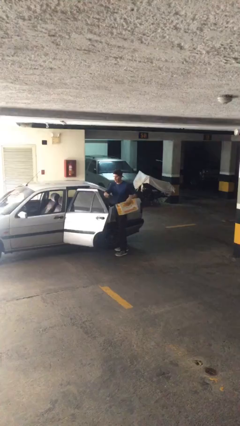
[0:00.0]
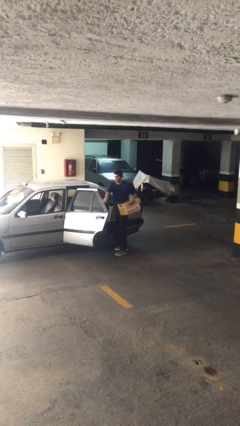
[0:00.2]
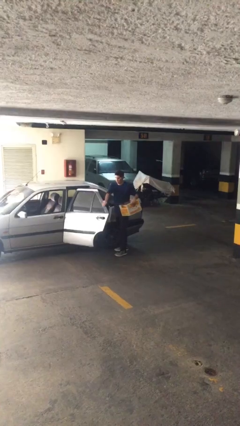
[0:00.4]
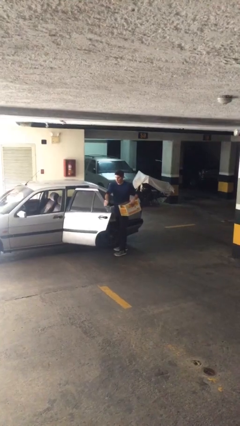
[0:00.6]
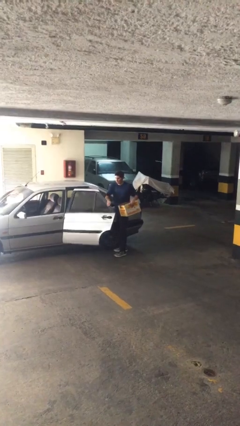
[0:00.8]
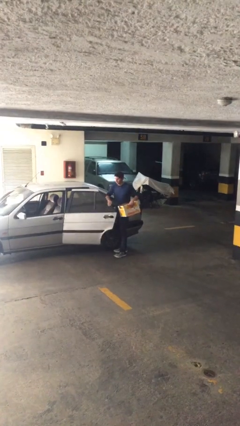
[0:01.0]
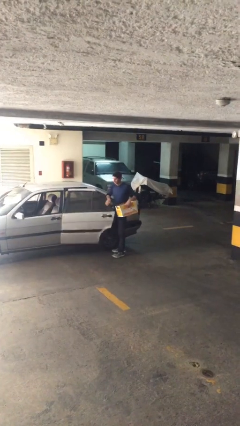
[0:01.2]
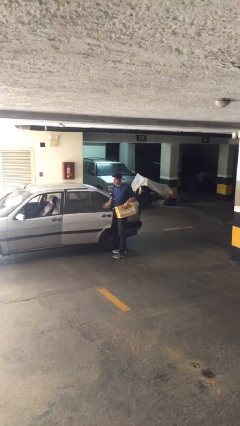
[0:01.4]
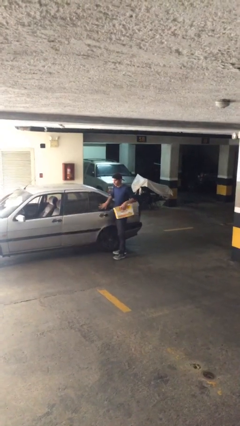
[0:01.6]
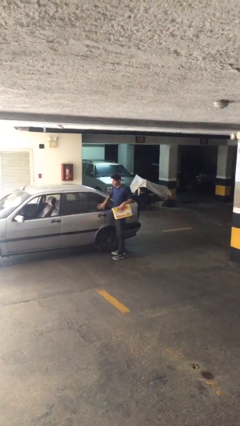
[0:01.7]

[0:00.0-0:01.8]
person closes car door

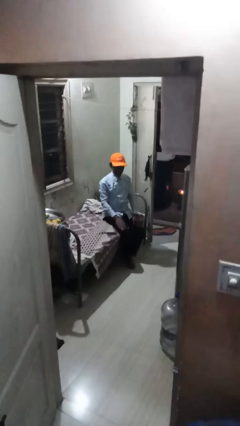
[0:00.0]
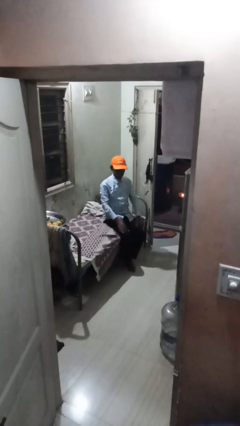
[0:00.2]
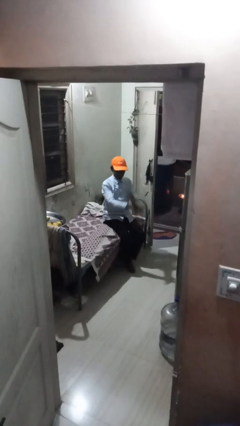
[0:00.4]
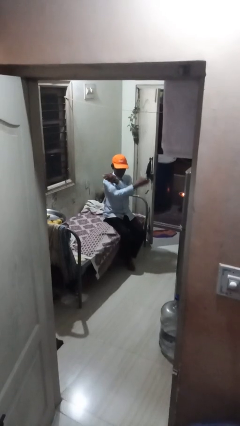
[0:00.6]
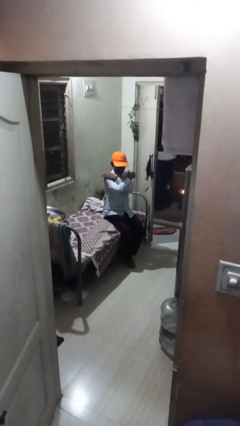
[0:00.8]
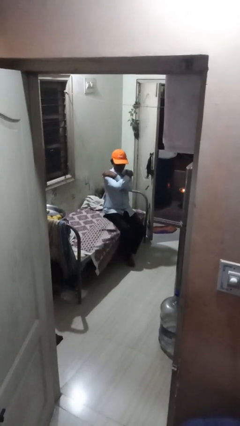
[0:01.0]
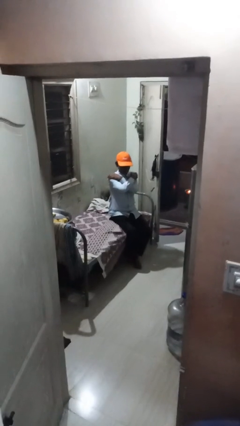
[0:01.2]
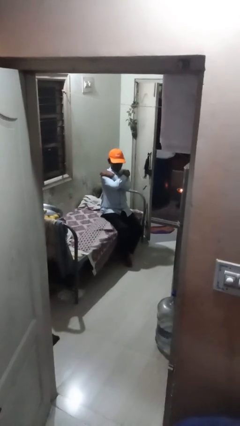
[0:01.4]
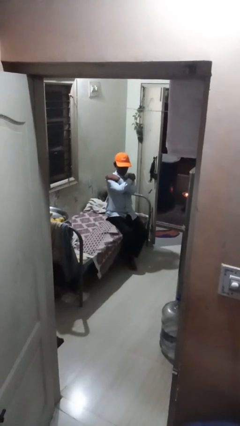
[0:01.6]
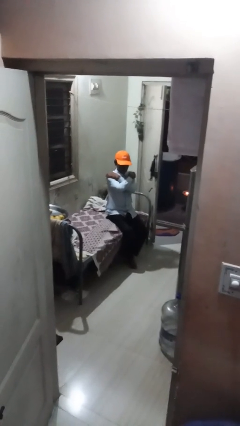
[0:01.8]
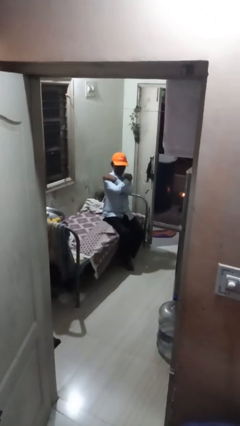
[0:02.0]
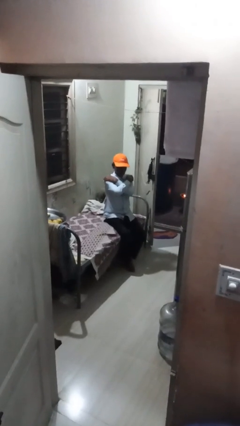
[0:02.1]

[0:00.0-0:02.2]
person gestures arms x

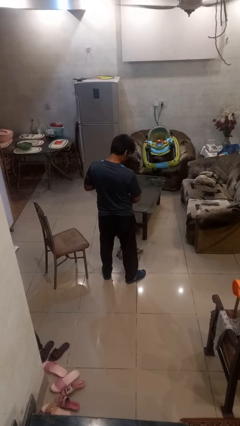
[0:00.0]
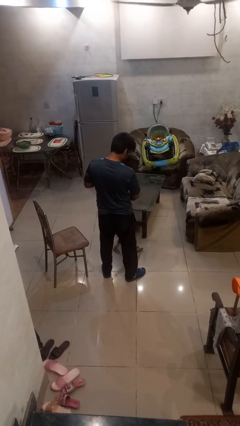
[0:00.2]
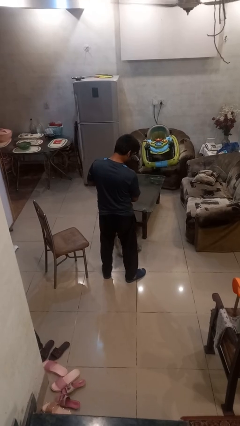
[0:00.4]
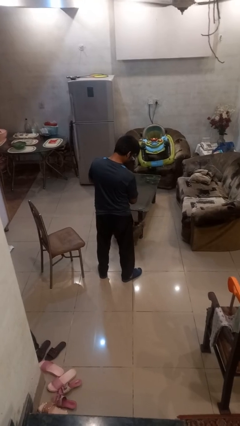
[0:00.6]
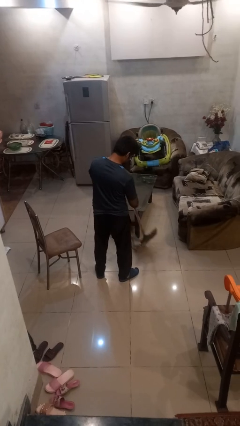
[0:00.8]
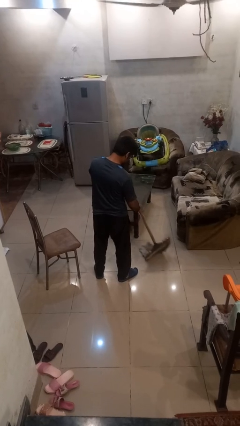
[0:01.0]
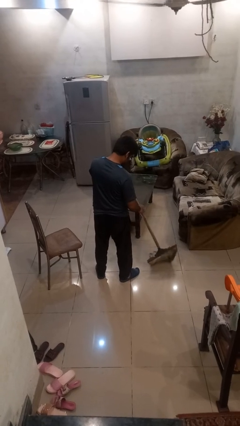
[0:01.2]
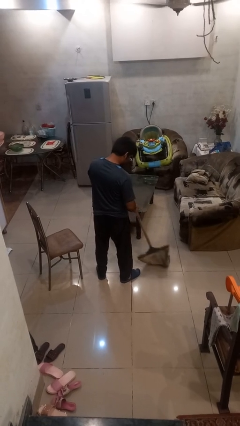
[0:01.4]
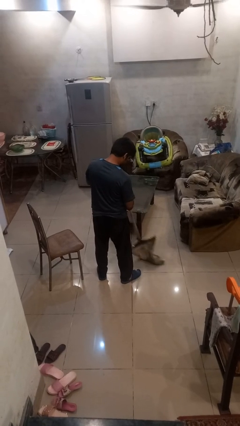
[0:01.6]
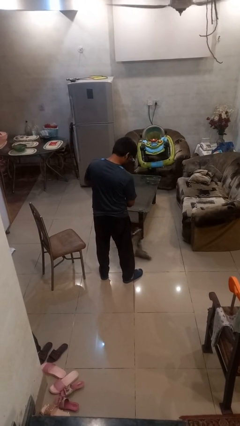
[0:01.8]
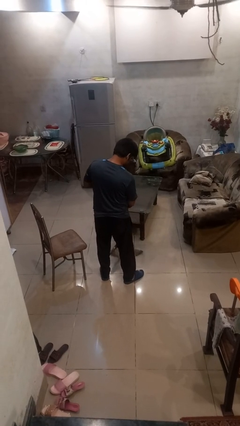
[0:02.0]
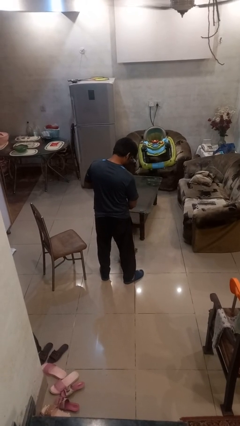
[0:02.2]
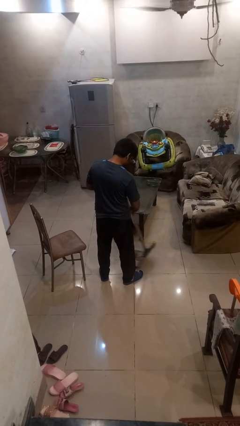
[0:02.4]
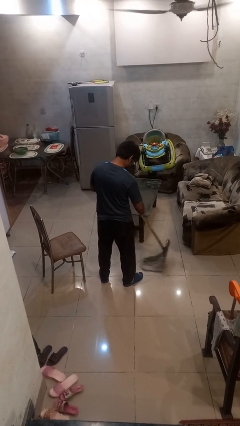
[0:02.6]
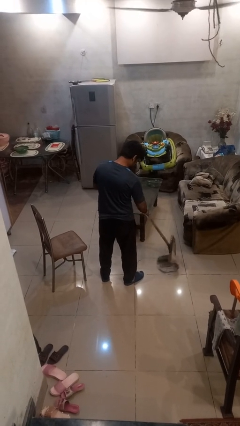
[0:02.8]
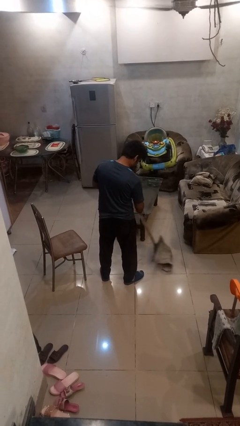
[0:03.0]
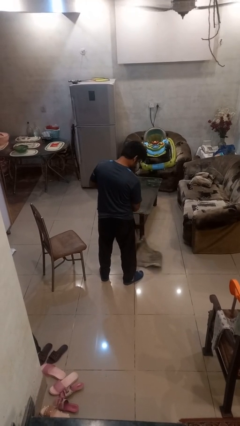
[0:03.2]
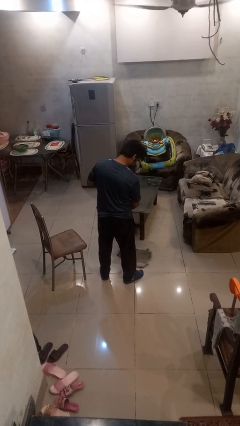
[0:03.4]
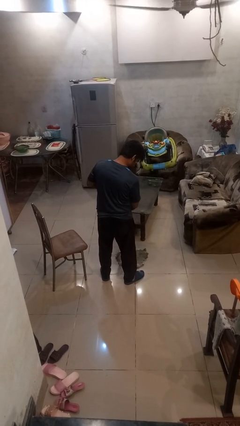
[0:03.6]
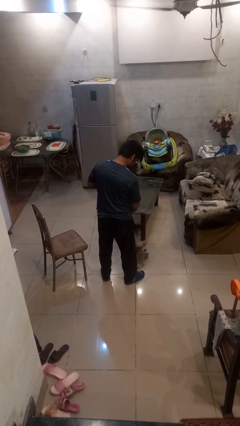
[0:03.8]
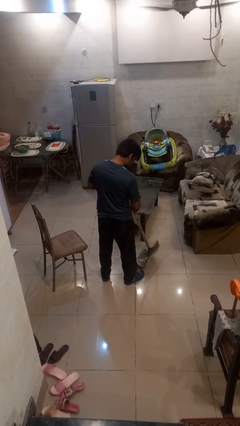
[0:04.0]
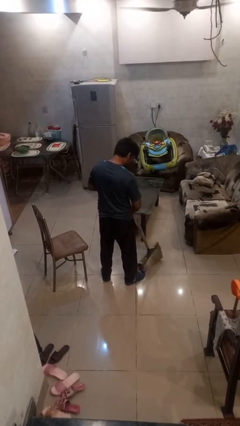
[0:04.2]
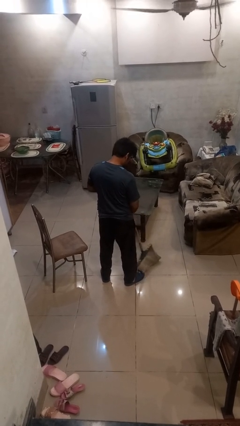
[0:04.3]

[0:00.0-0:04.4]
person mops

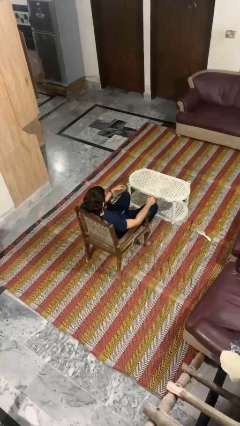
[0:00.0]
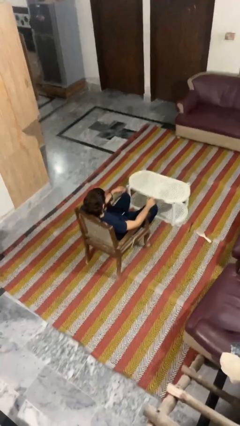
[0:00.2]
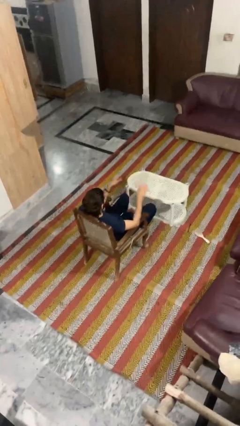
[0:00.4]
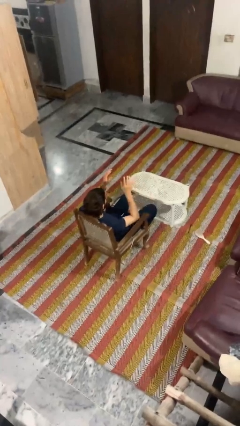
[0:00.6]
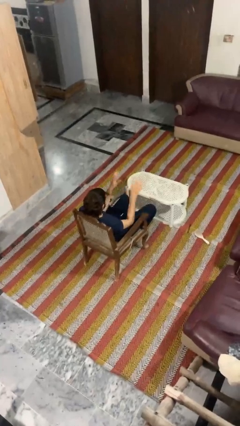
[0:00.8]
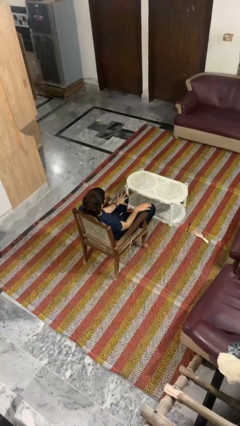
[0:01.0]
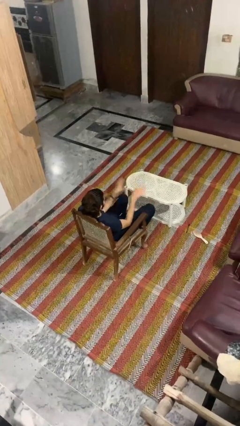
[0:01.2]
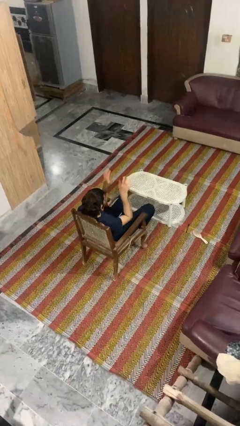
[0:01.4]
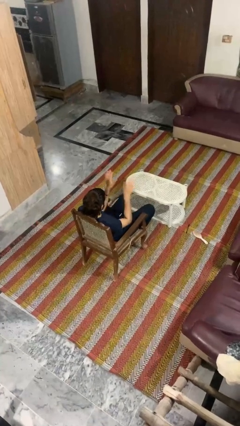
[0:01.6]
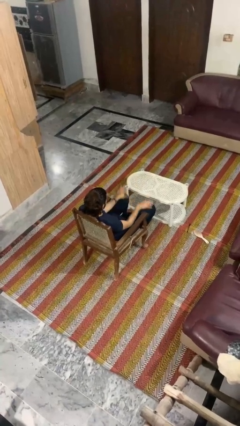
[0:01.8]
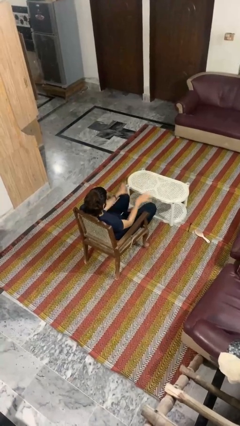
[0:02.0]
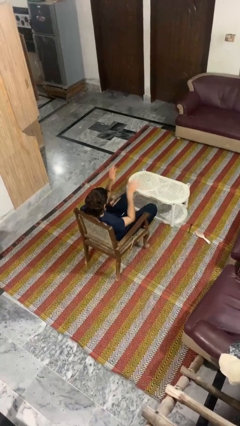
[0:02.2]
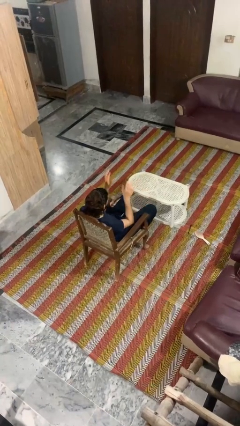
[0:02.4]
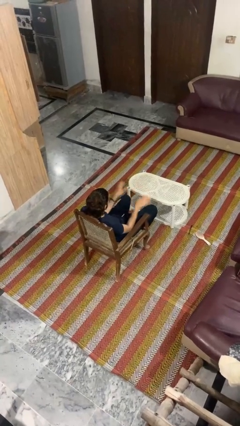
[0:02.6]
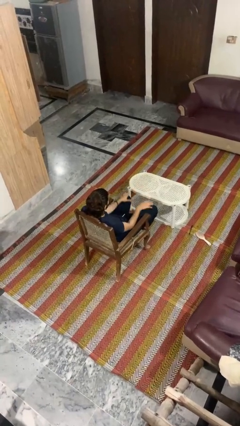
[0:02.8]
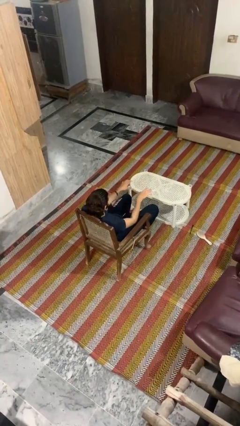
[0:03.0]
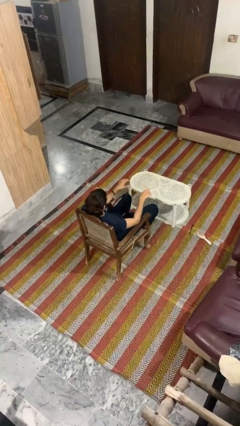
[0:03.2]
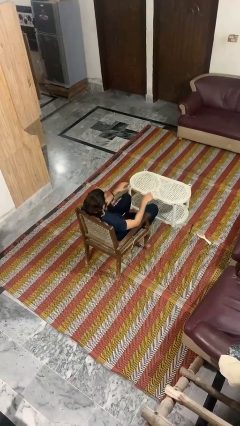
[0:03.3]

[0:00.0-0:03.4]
person slaps hands on thighs

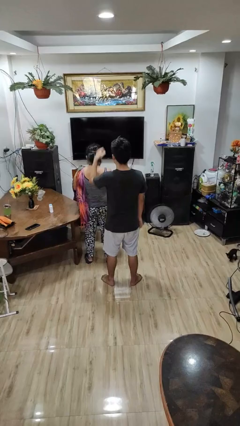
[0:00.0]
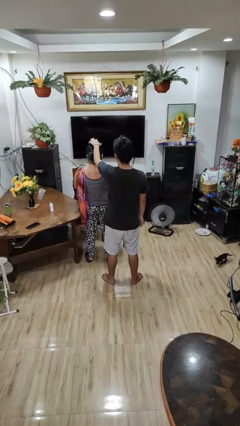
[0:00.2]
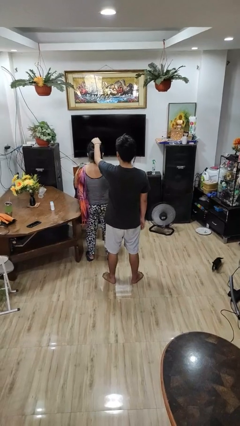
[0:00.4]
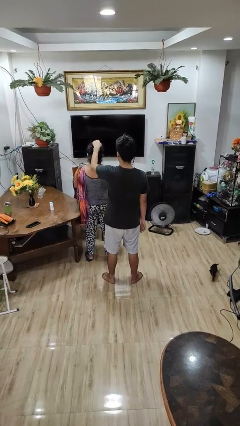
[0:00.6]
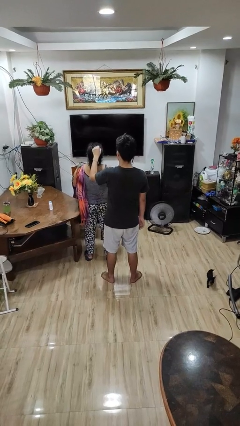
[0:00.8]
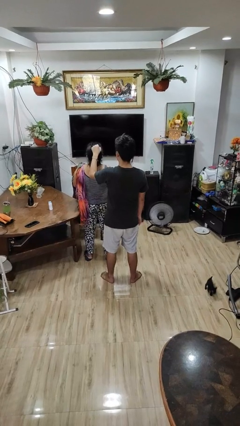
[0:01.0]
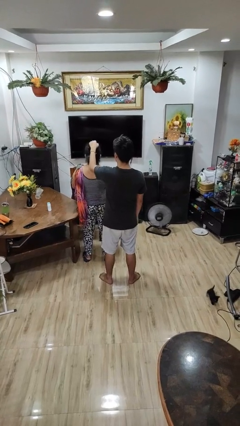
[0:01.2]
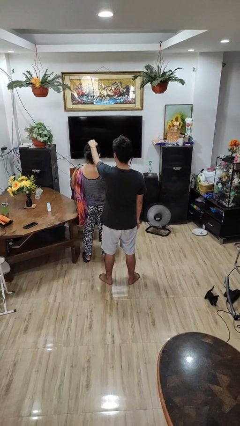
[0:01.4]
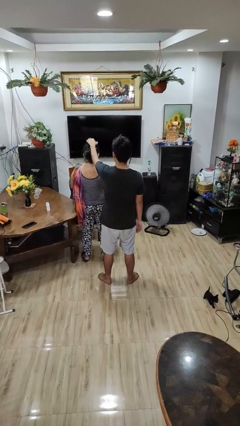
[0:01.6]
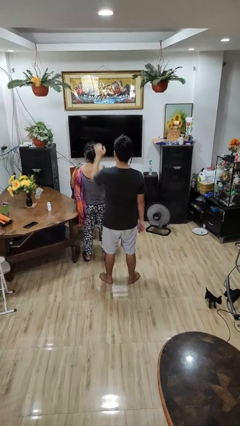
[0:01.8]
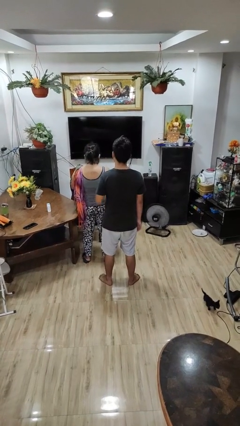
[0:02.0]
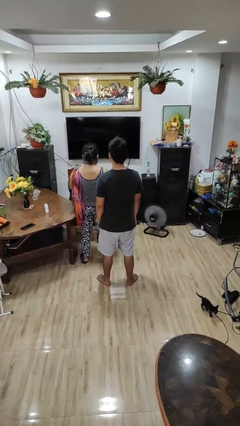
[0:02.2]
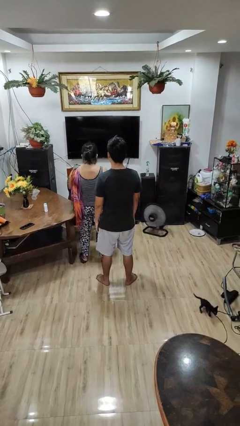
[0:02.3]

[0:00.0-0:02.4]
person grabs person by hair

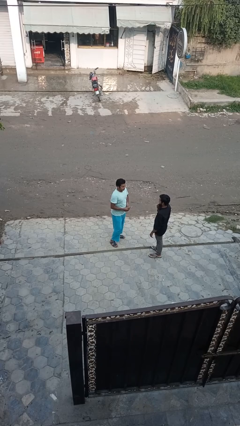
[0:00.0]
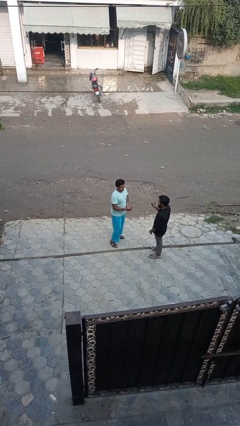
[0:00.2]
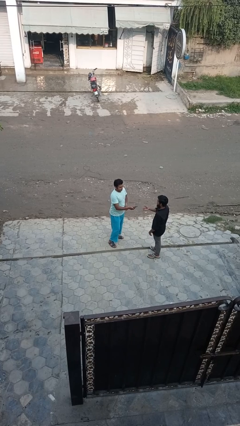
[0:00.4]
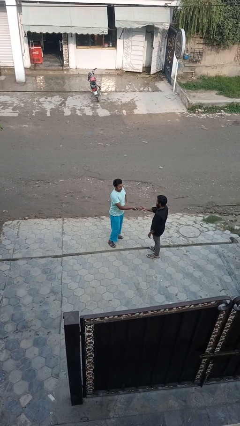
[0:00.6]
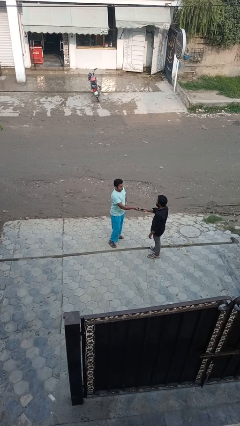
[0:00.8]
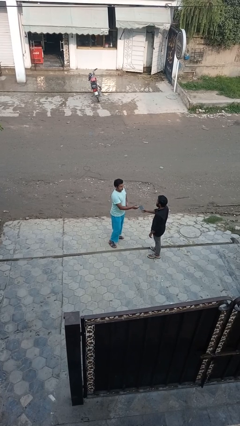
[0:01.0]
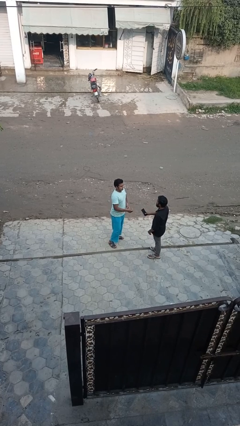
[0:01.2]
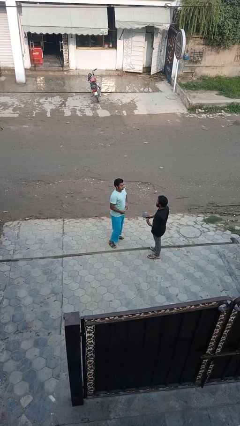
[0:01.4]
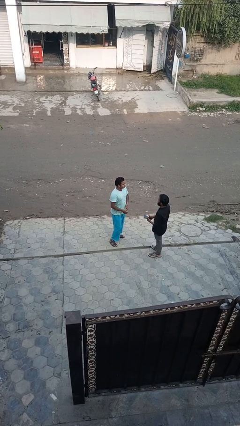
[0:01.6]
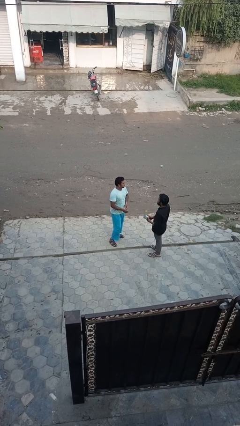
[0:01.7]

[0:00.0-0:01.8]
person transfers object to person

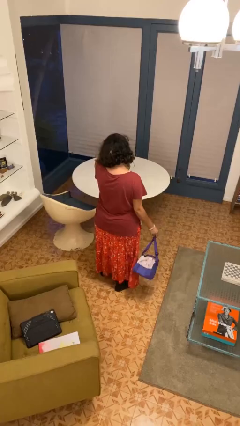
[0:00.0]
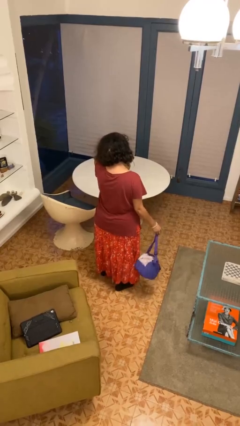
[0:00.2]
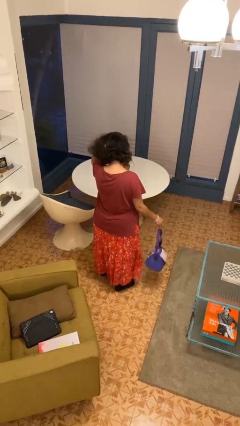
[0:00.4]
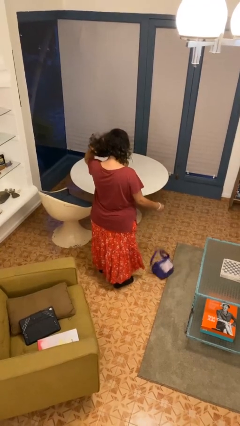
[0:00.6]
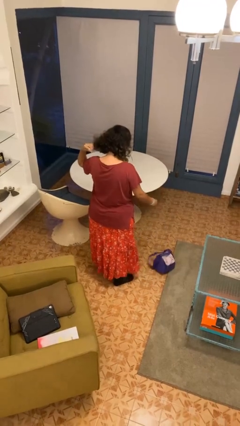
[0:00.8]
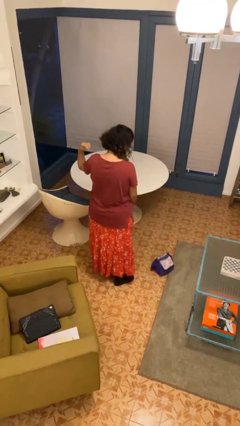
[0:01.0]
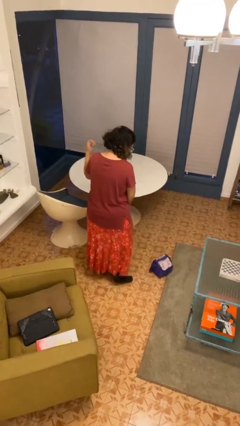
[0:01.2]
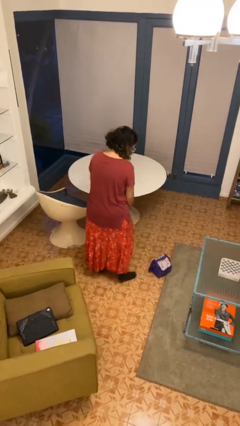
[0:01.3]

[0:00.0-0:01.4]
person drops object
